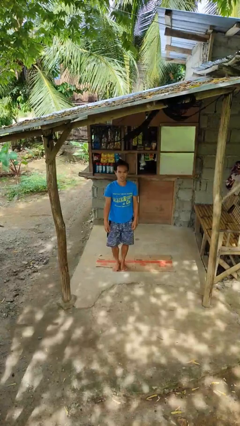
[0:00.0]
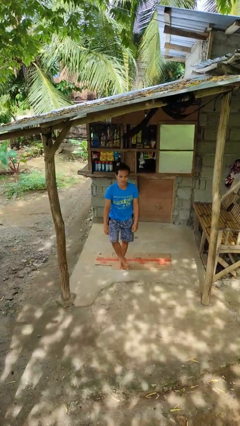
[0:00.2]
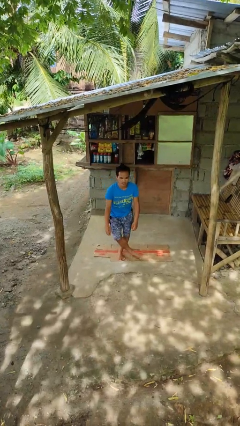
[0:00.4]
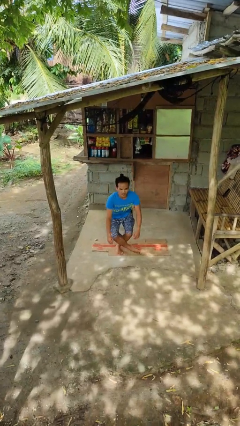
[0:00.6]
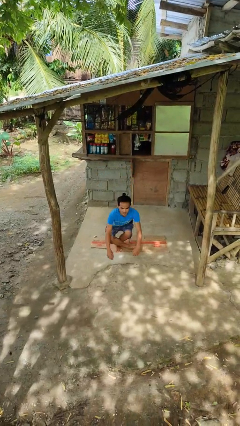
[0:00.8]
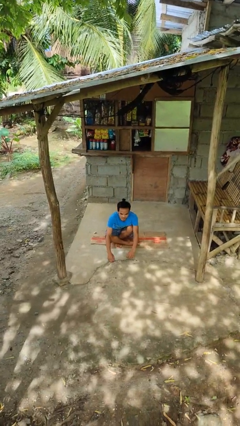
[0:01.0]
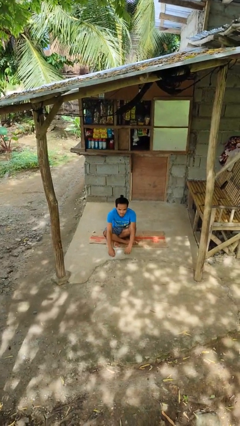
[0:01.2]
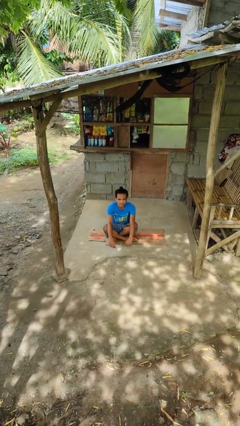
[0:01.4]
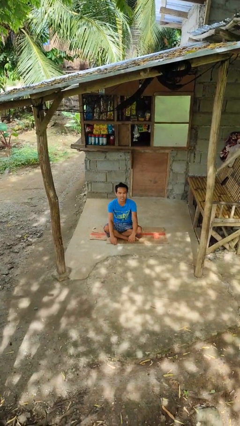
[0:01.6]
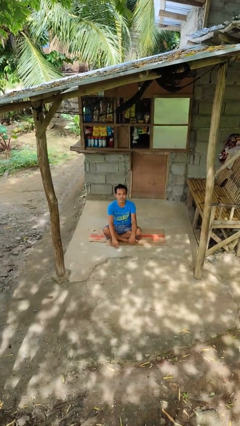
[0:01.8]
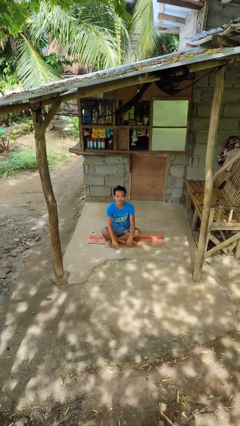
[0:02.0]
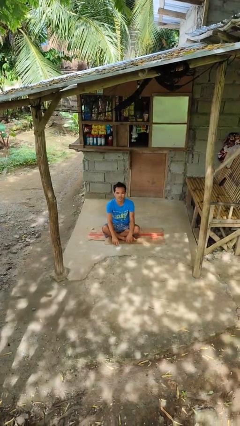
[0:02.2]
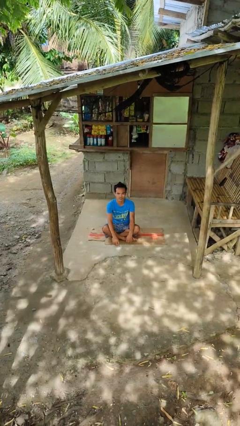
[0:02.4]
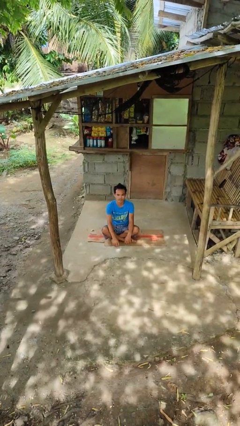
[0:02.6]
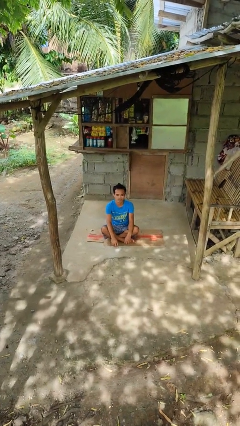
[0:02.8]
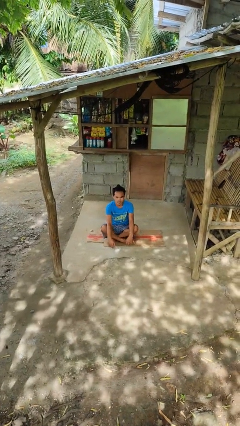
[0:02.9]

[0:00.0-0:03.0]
person sits crisscross

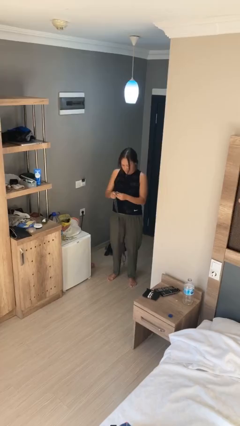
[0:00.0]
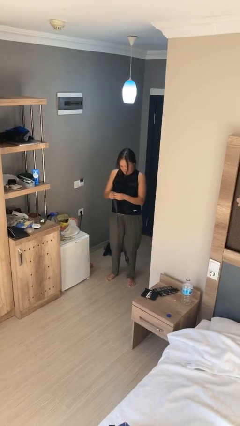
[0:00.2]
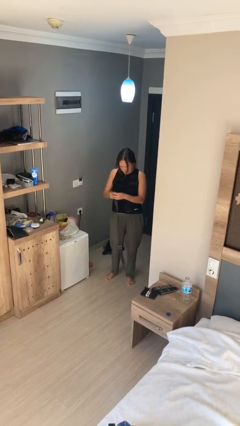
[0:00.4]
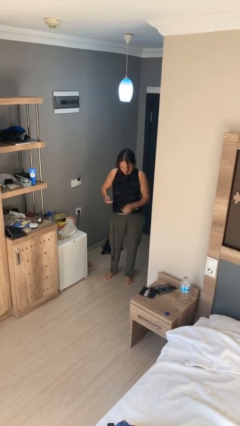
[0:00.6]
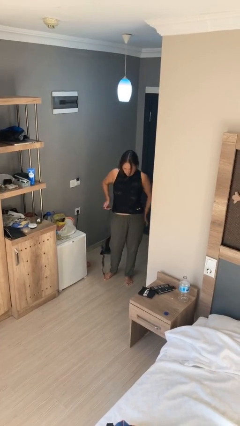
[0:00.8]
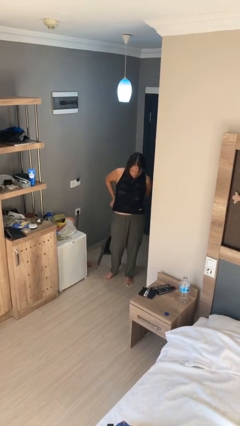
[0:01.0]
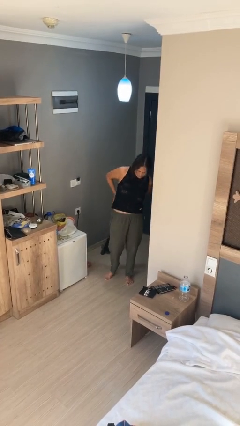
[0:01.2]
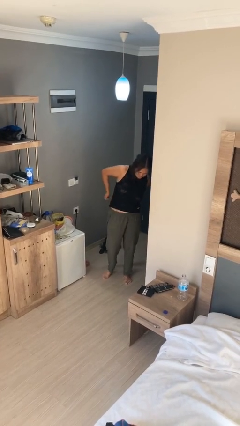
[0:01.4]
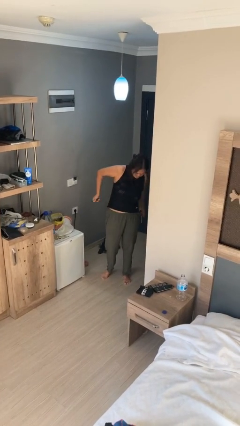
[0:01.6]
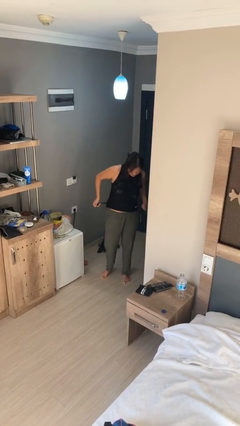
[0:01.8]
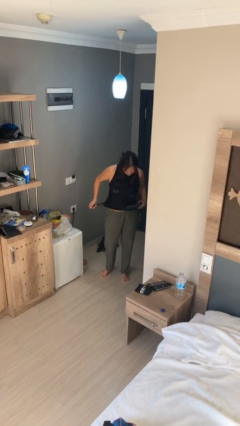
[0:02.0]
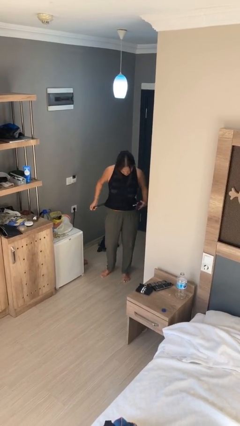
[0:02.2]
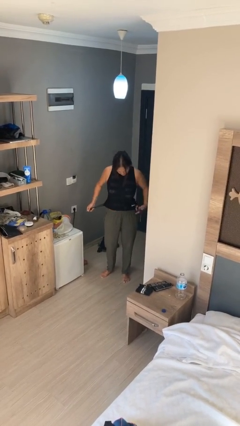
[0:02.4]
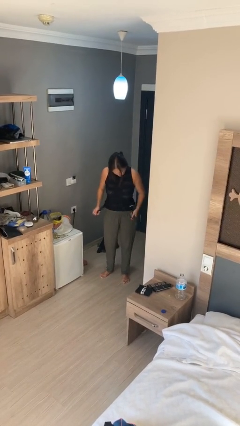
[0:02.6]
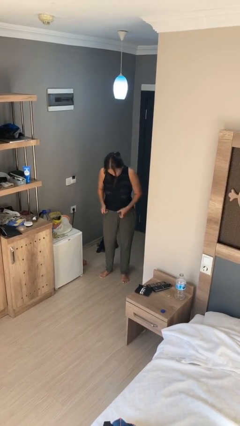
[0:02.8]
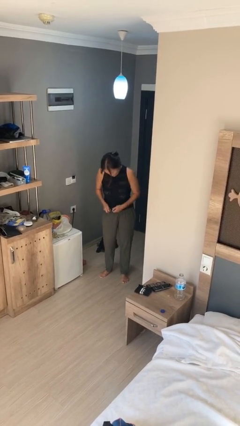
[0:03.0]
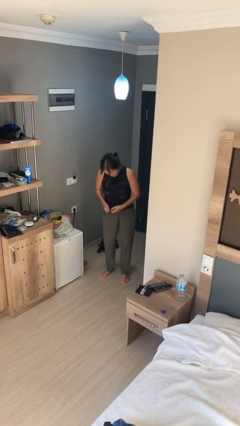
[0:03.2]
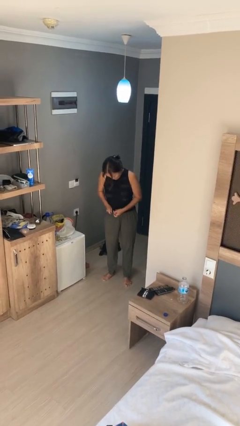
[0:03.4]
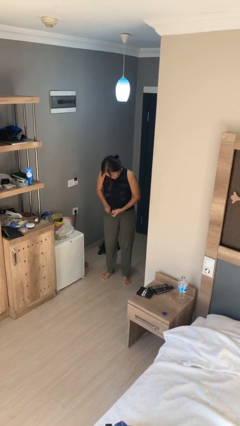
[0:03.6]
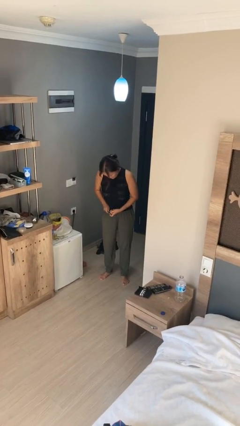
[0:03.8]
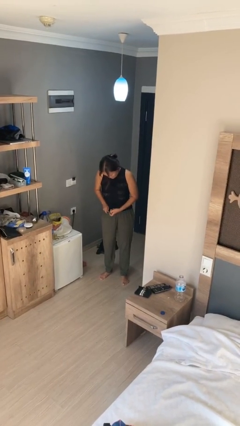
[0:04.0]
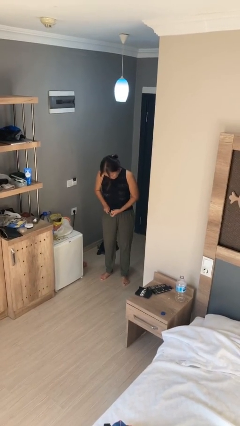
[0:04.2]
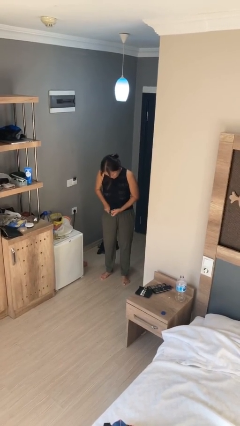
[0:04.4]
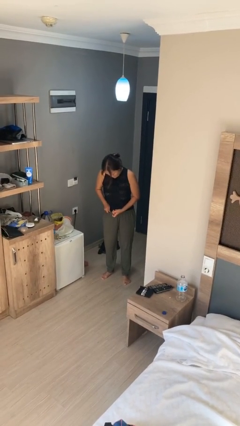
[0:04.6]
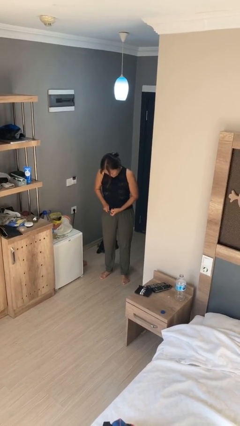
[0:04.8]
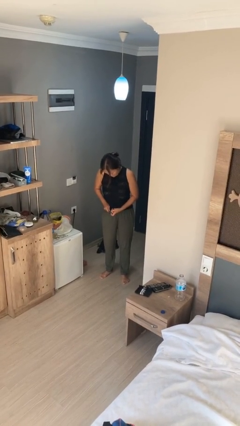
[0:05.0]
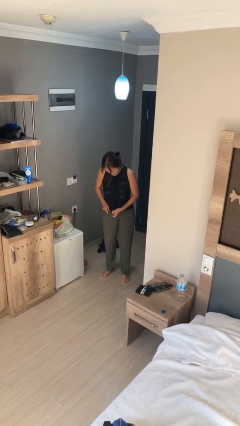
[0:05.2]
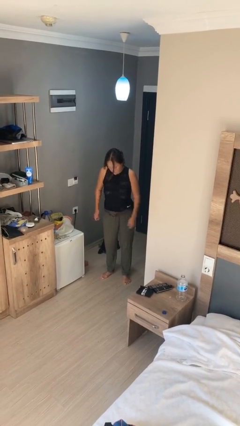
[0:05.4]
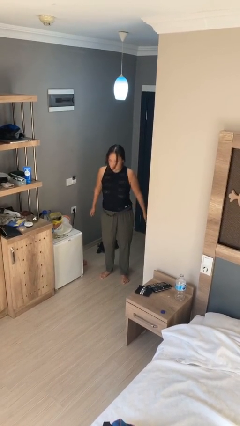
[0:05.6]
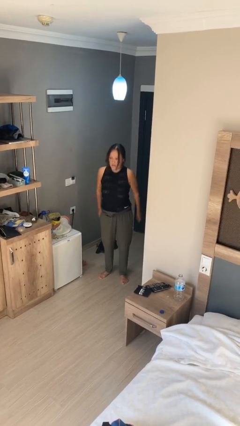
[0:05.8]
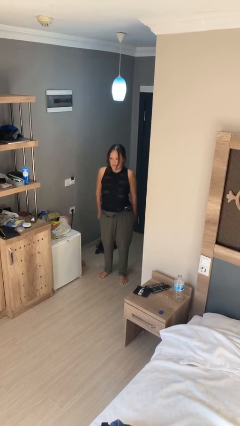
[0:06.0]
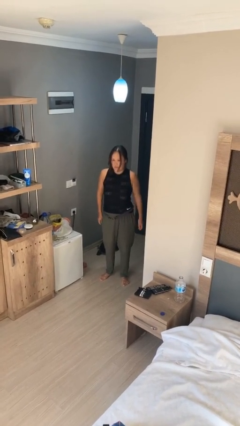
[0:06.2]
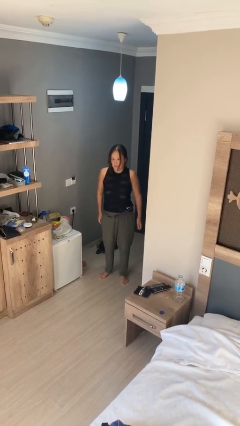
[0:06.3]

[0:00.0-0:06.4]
person puts on belt

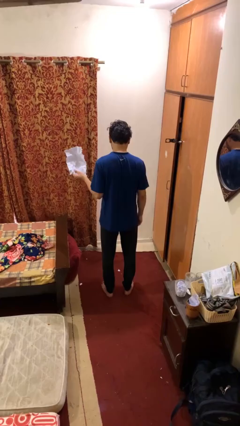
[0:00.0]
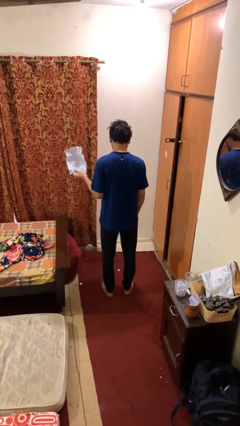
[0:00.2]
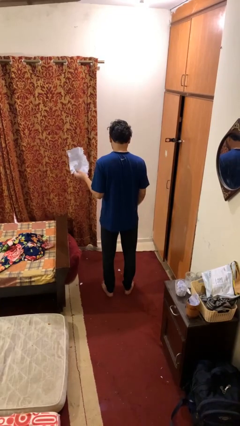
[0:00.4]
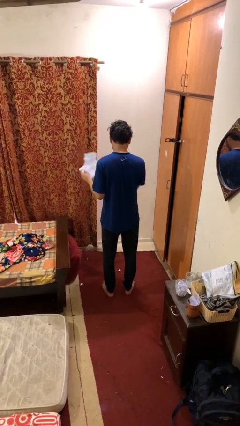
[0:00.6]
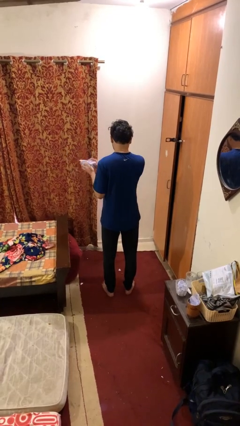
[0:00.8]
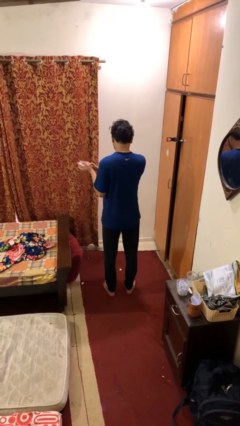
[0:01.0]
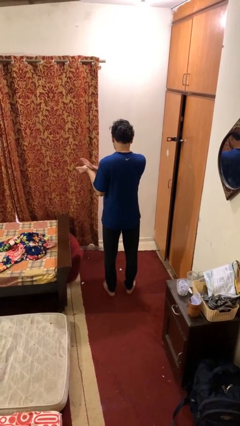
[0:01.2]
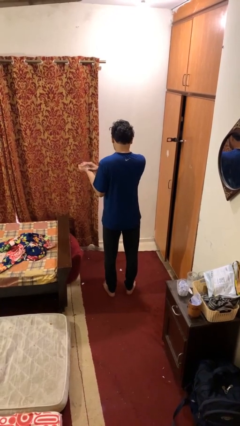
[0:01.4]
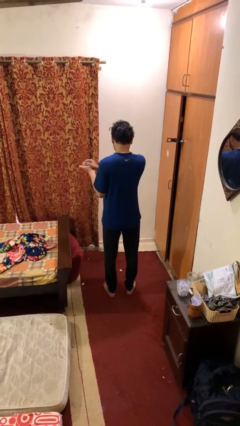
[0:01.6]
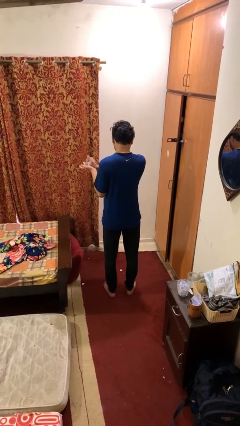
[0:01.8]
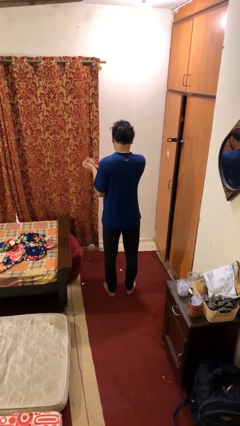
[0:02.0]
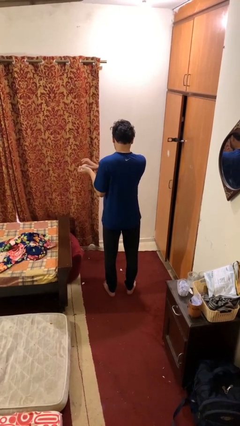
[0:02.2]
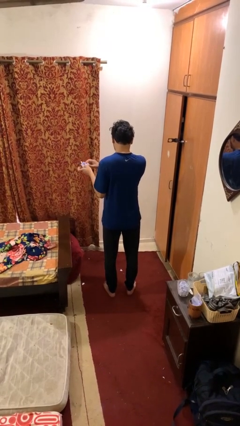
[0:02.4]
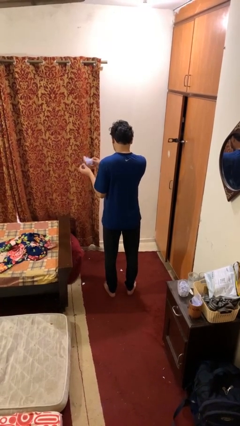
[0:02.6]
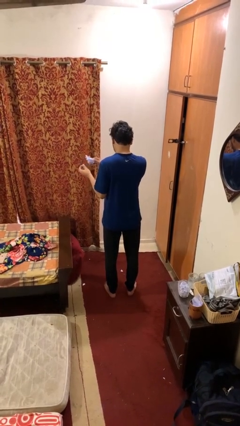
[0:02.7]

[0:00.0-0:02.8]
person crumples paper

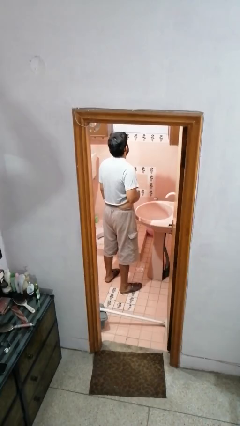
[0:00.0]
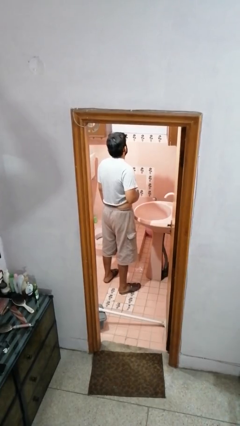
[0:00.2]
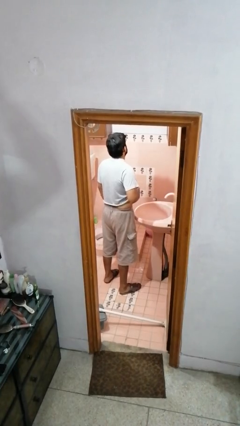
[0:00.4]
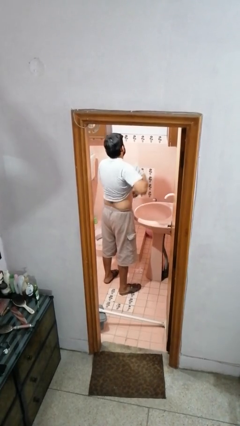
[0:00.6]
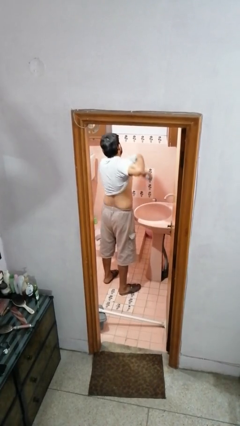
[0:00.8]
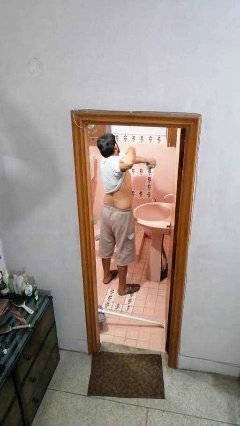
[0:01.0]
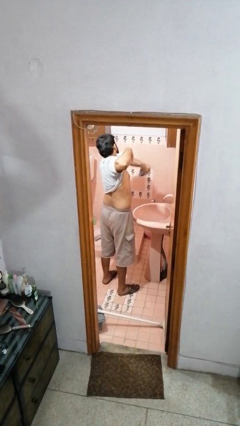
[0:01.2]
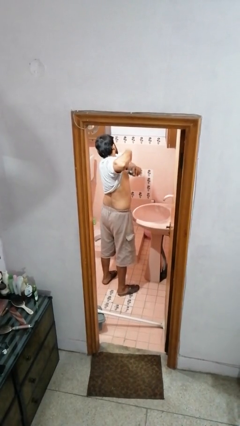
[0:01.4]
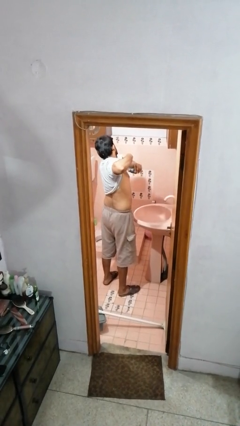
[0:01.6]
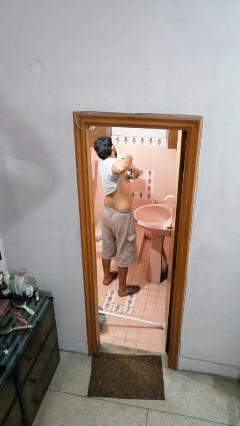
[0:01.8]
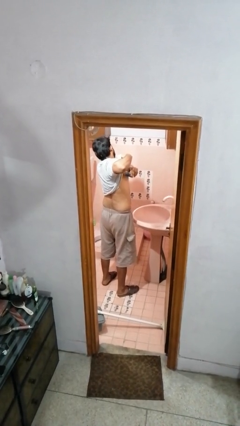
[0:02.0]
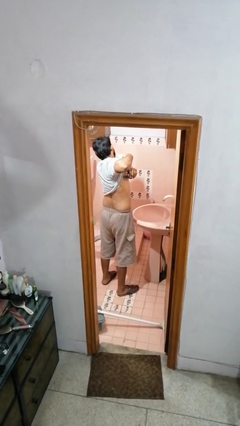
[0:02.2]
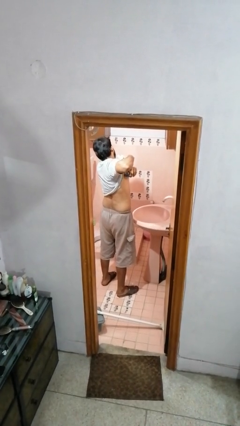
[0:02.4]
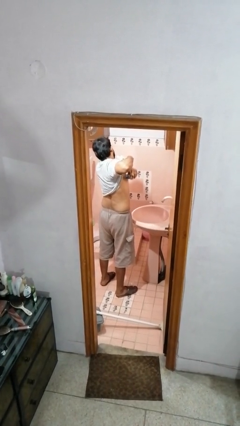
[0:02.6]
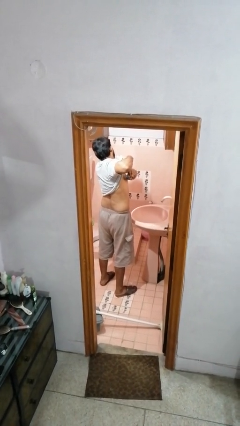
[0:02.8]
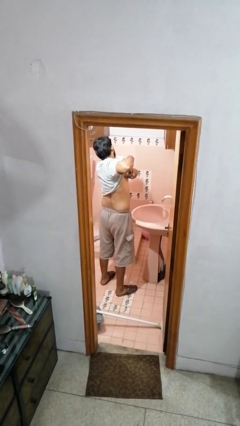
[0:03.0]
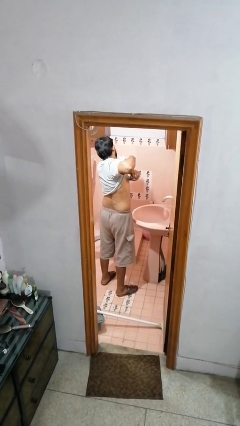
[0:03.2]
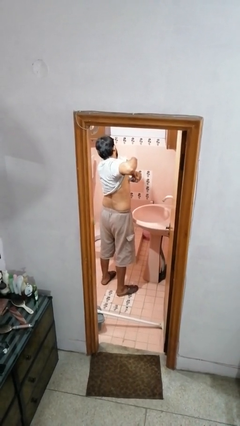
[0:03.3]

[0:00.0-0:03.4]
person applies deodorant

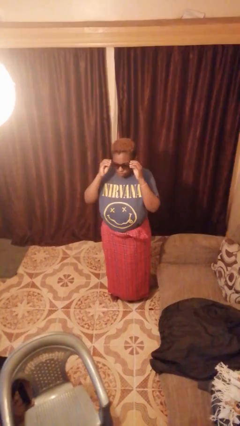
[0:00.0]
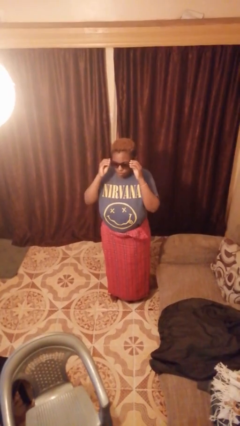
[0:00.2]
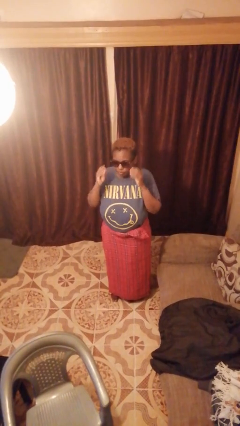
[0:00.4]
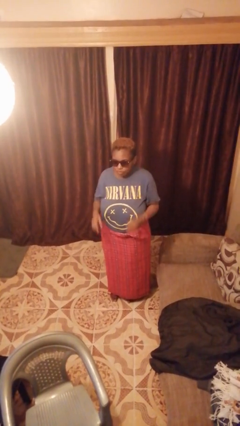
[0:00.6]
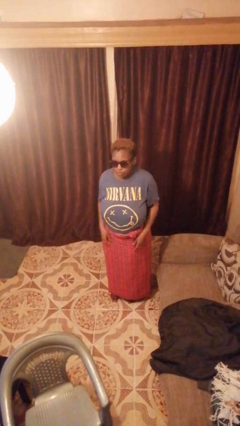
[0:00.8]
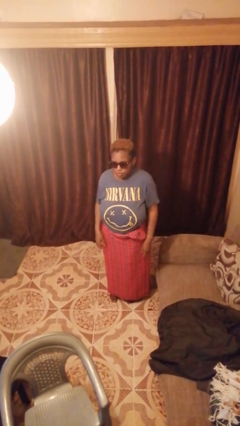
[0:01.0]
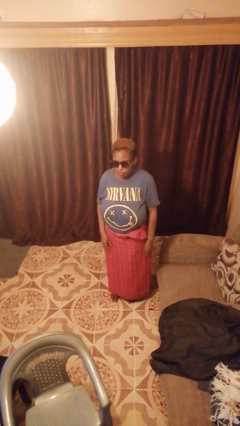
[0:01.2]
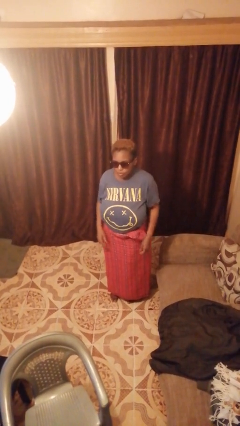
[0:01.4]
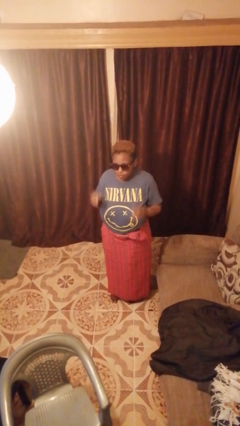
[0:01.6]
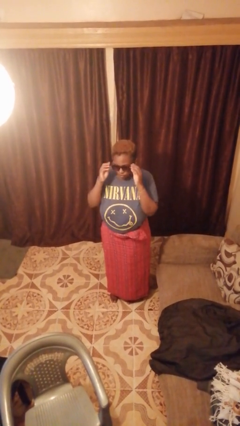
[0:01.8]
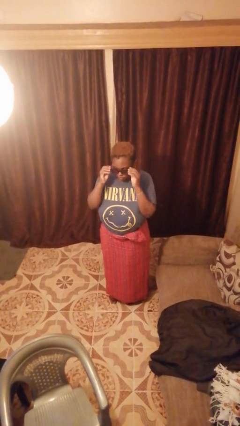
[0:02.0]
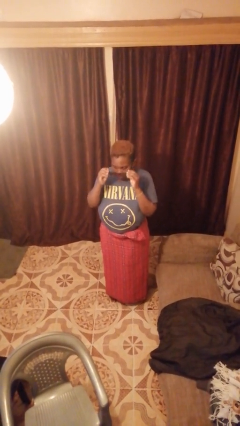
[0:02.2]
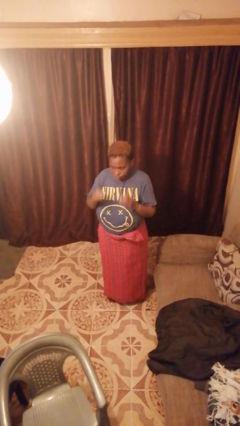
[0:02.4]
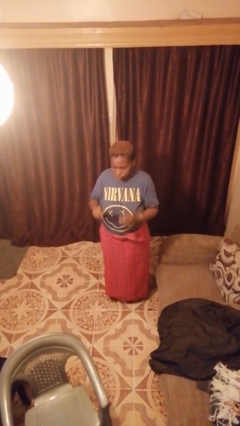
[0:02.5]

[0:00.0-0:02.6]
person takes off sunglasses
